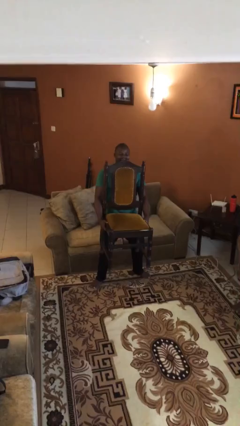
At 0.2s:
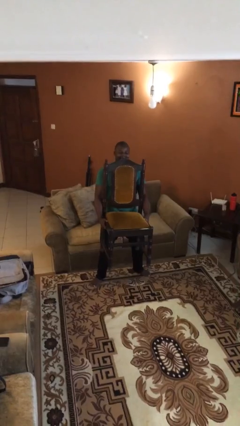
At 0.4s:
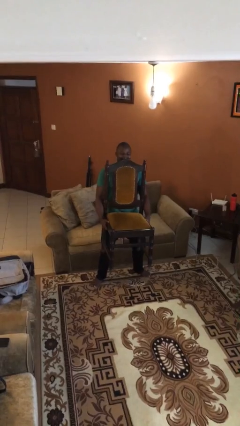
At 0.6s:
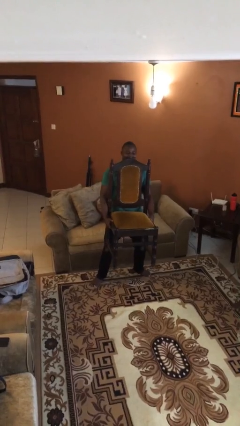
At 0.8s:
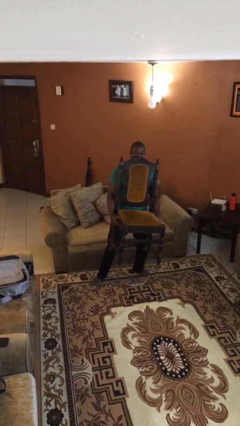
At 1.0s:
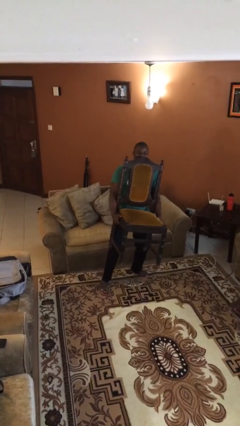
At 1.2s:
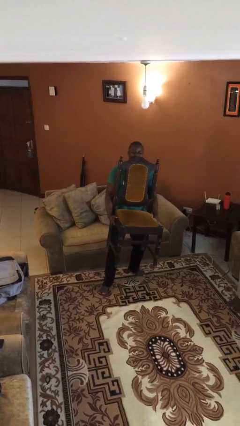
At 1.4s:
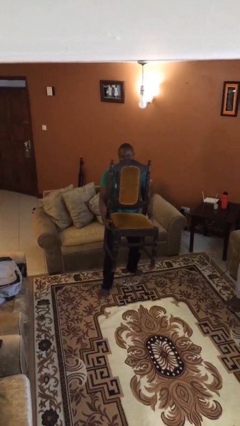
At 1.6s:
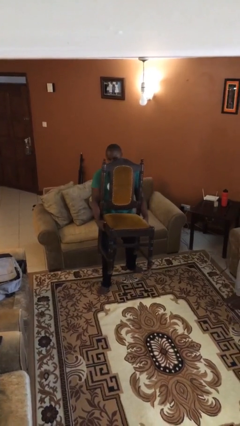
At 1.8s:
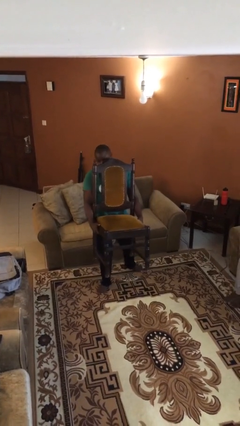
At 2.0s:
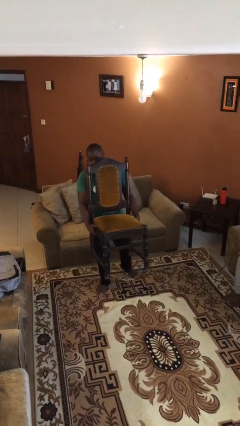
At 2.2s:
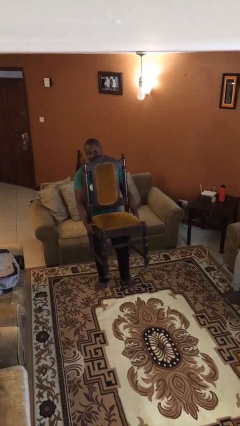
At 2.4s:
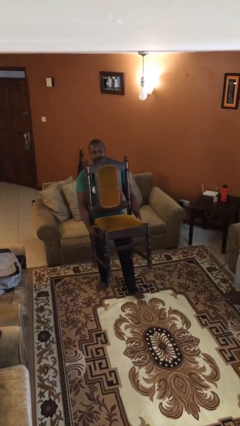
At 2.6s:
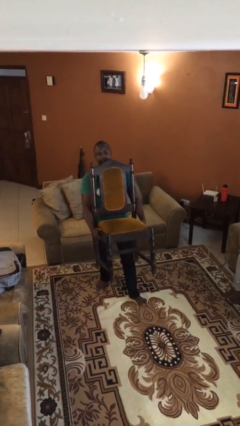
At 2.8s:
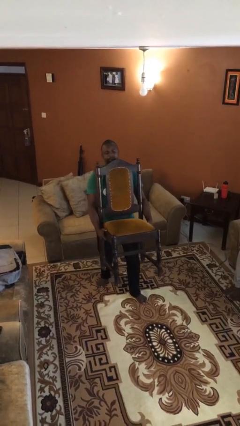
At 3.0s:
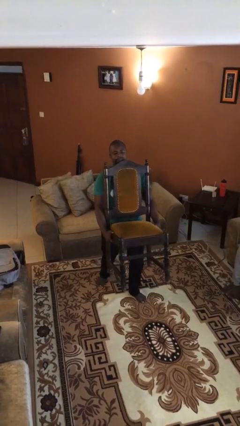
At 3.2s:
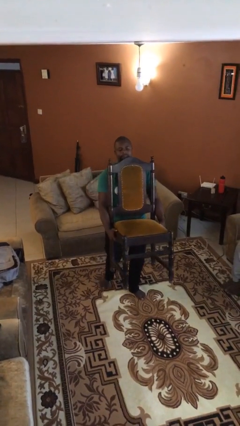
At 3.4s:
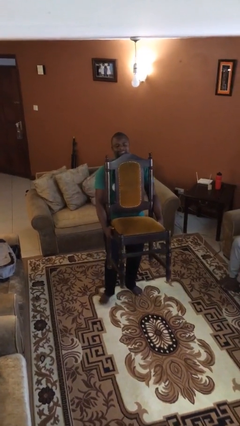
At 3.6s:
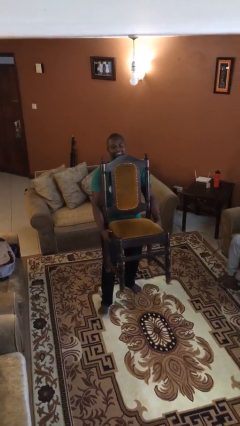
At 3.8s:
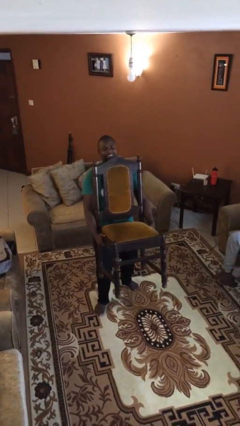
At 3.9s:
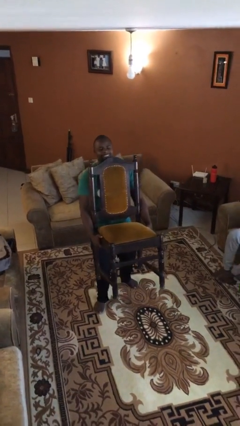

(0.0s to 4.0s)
person carries heavy object

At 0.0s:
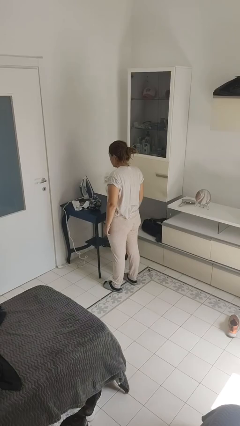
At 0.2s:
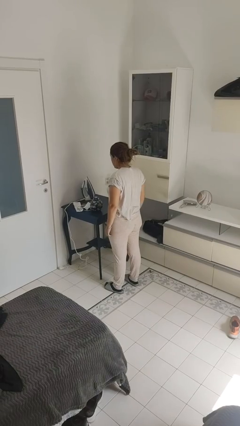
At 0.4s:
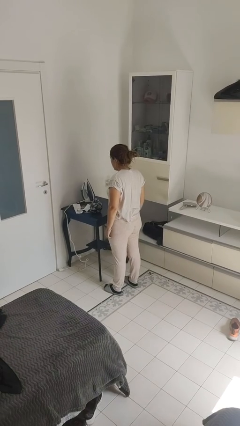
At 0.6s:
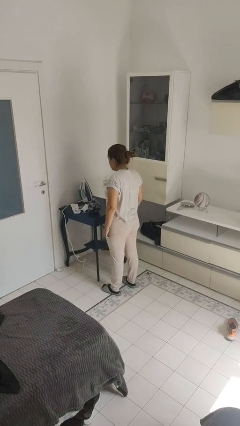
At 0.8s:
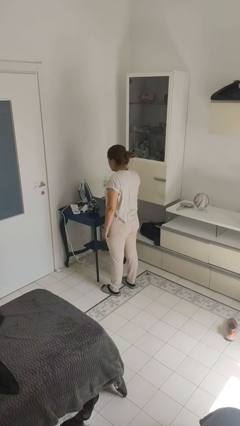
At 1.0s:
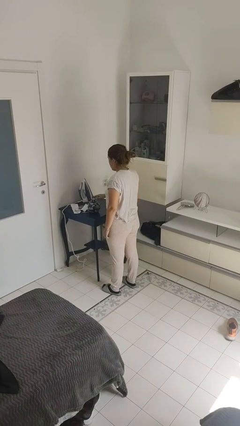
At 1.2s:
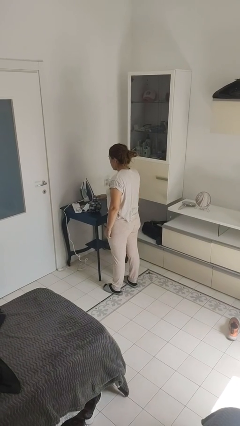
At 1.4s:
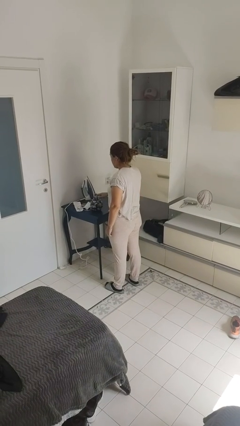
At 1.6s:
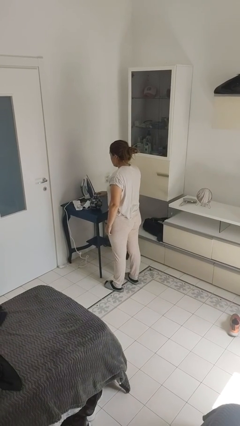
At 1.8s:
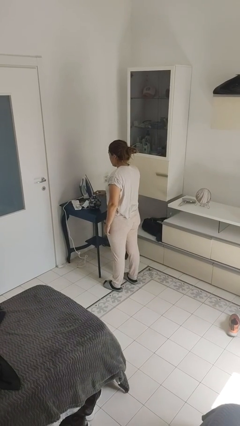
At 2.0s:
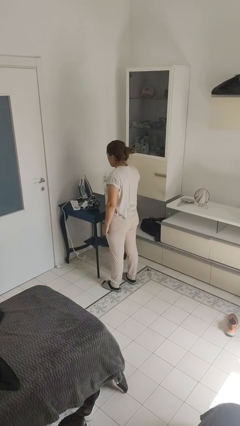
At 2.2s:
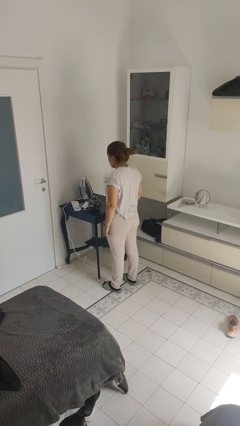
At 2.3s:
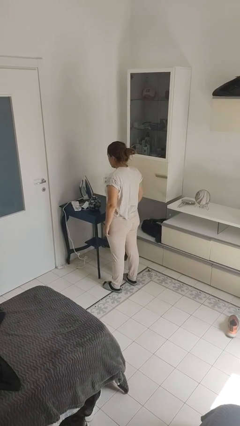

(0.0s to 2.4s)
person taps object with finger

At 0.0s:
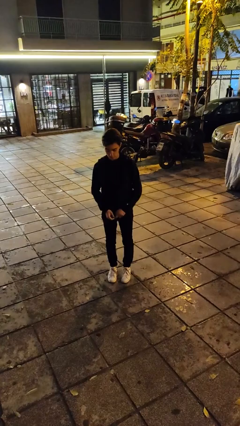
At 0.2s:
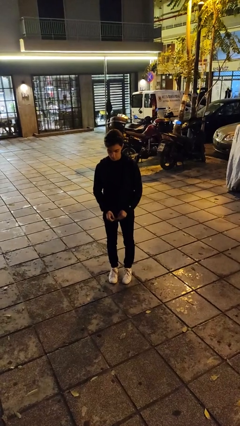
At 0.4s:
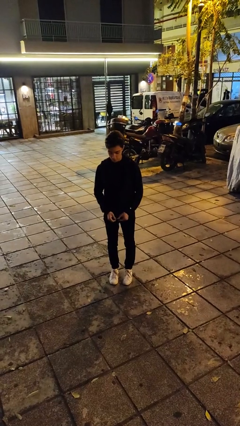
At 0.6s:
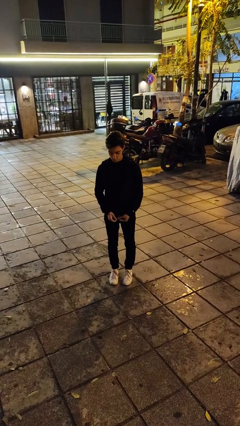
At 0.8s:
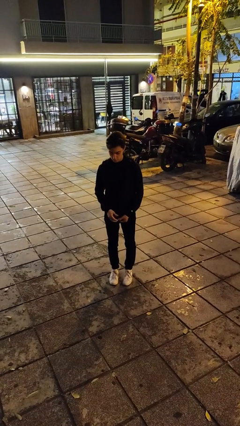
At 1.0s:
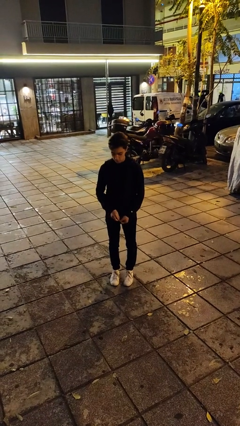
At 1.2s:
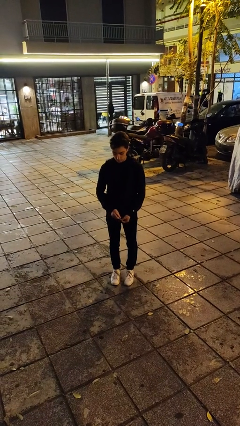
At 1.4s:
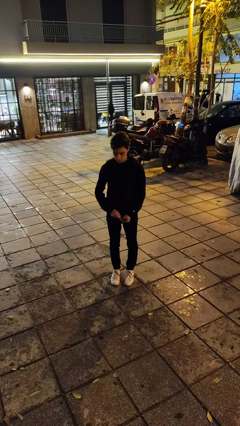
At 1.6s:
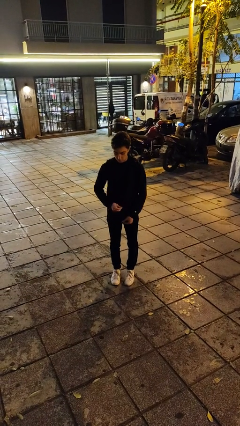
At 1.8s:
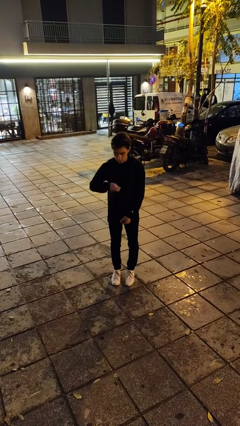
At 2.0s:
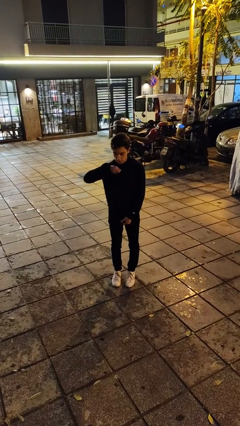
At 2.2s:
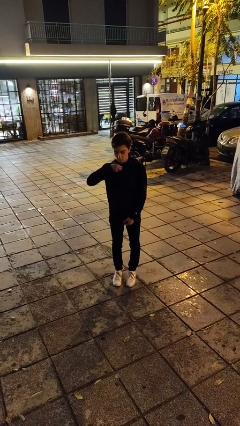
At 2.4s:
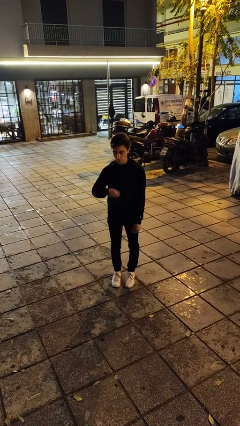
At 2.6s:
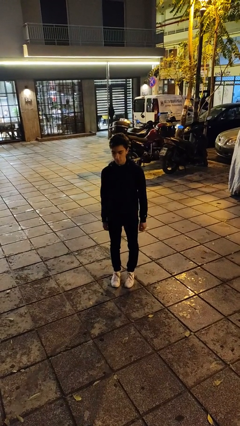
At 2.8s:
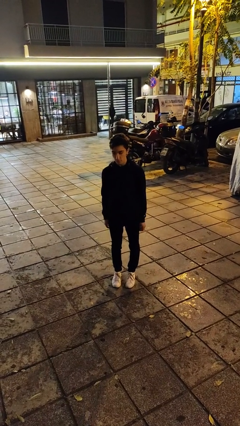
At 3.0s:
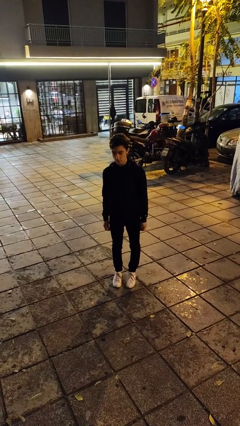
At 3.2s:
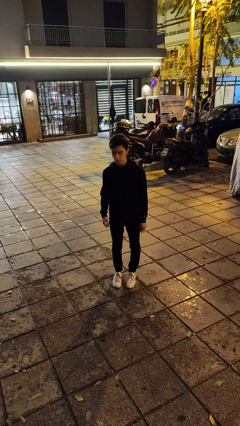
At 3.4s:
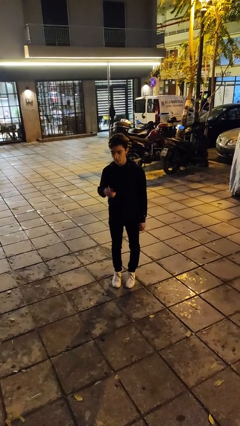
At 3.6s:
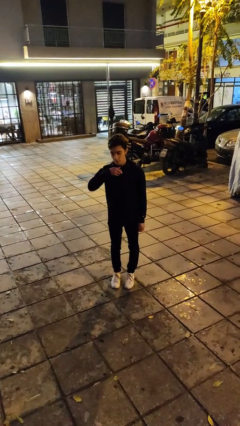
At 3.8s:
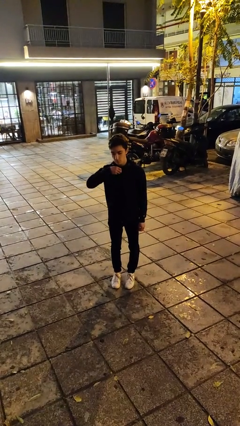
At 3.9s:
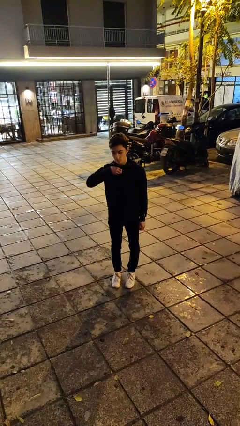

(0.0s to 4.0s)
person zips up jacket

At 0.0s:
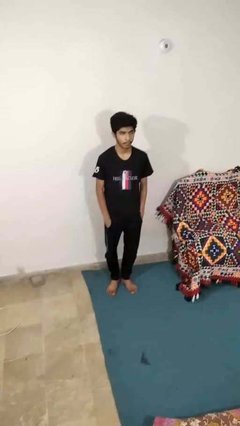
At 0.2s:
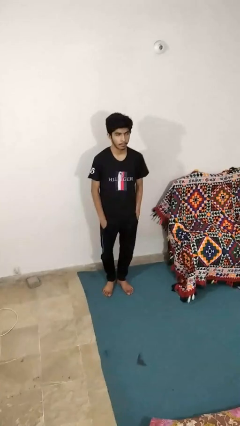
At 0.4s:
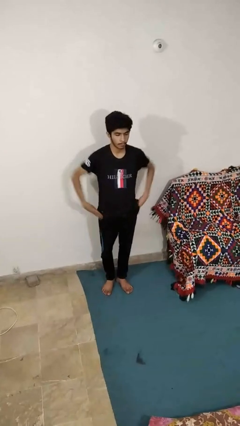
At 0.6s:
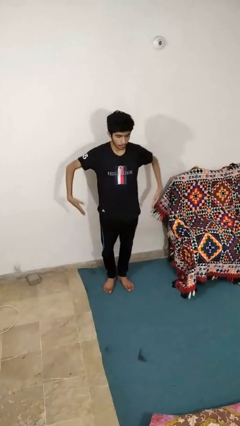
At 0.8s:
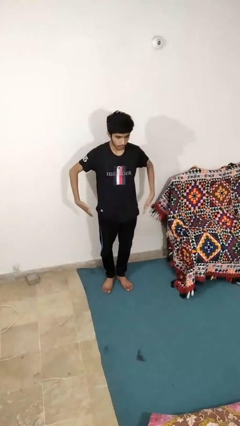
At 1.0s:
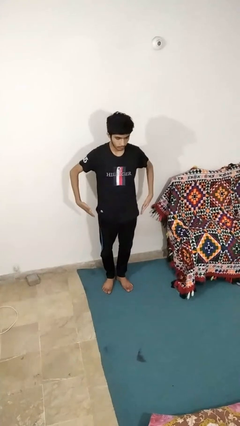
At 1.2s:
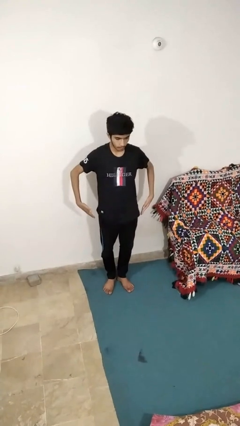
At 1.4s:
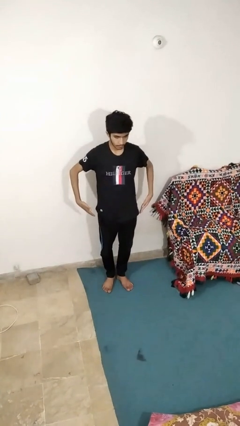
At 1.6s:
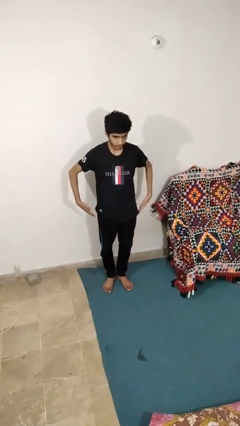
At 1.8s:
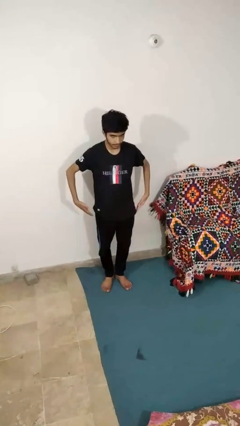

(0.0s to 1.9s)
person puts hands in back pockets

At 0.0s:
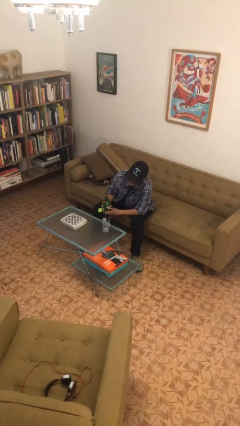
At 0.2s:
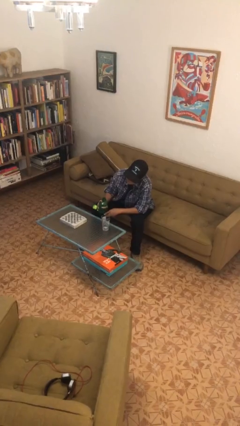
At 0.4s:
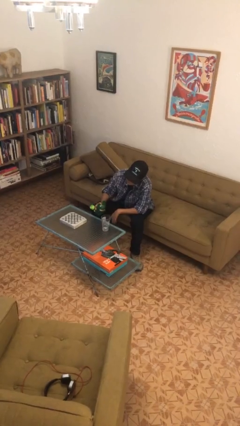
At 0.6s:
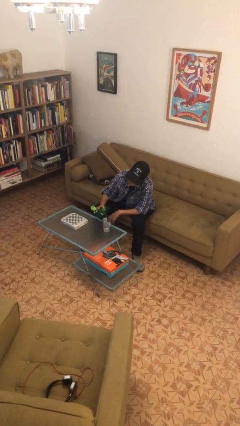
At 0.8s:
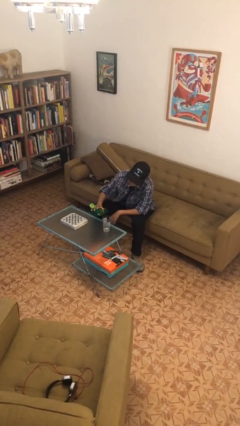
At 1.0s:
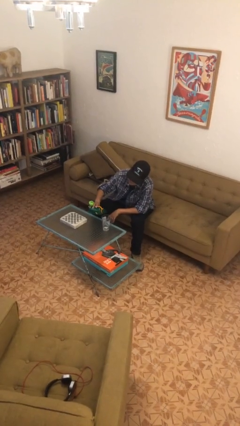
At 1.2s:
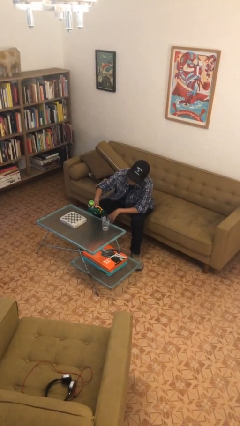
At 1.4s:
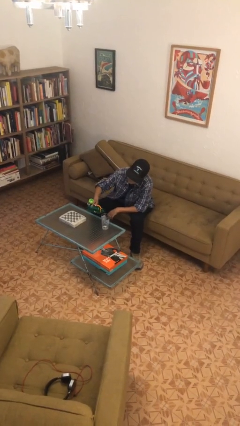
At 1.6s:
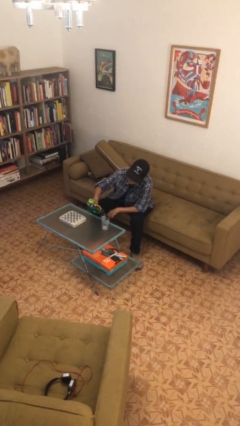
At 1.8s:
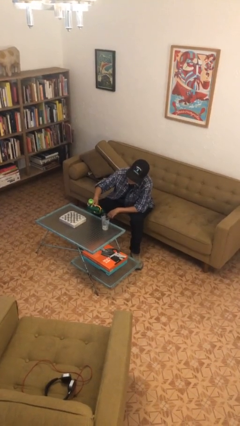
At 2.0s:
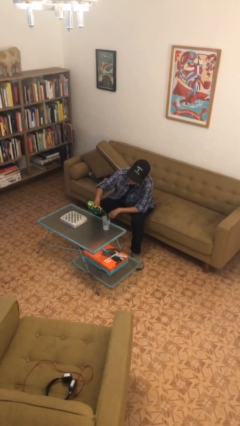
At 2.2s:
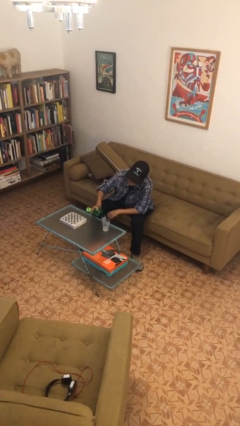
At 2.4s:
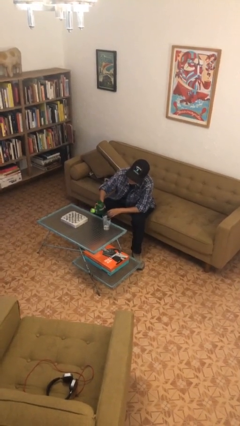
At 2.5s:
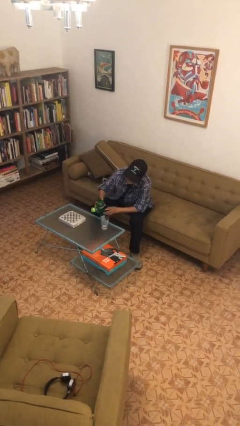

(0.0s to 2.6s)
person pours liquid into cup

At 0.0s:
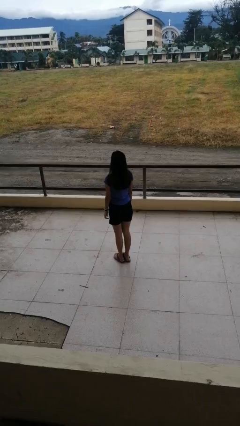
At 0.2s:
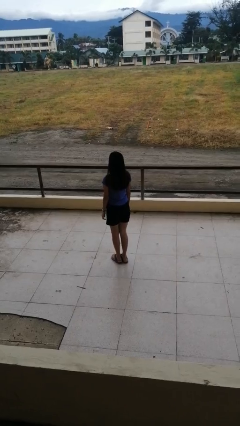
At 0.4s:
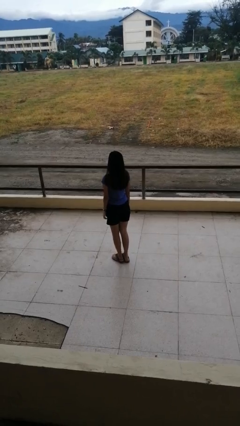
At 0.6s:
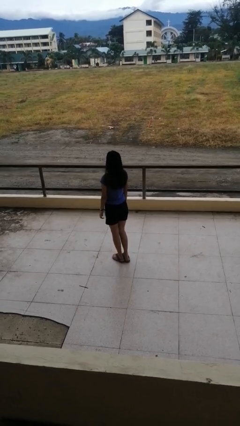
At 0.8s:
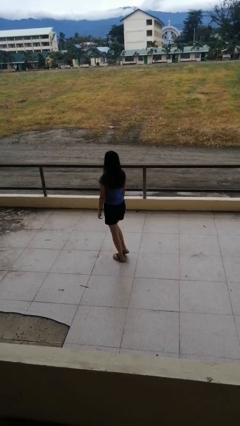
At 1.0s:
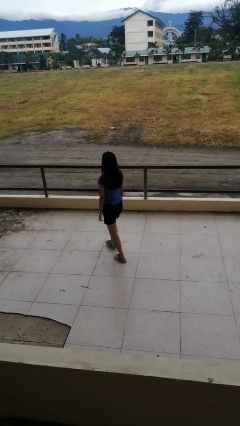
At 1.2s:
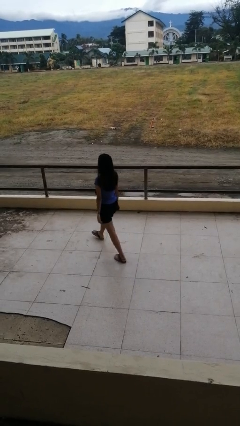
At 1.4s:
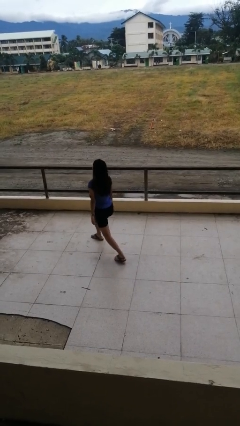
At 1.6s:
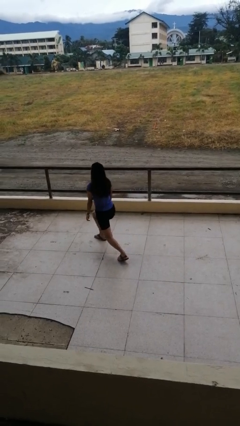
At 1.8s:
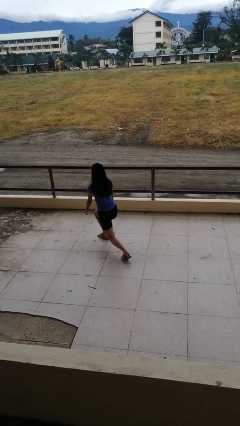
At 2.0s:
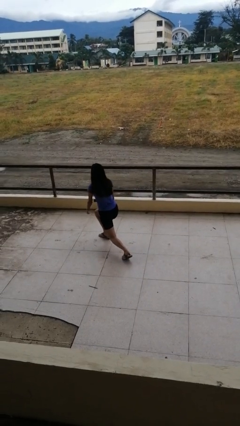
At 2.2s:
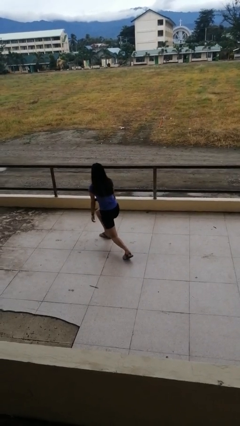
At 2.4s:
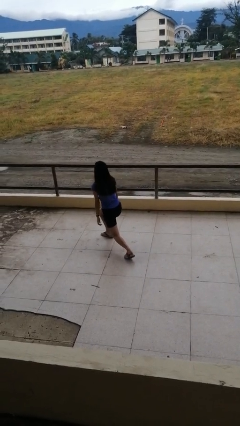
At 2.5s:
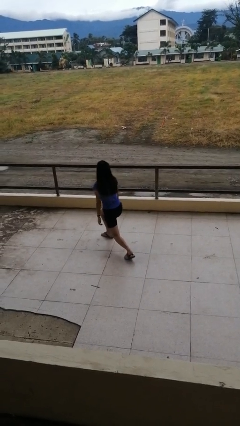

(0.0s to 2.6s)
person exercises with lunges

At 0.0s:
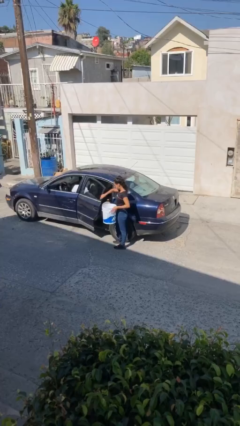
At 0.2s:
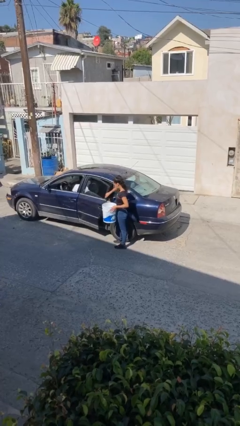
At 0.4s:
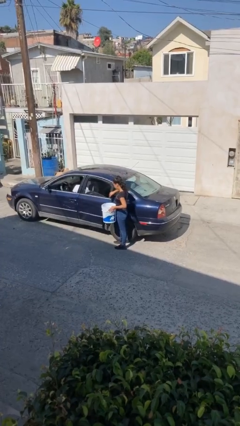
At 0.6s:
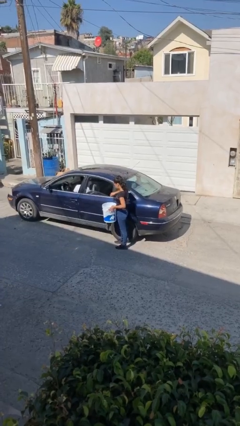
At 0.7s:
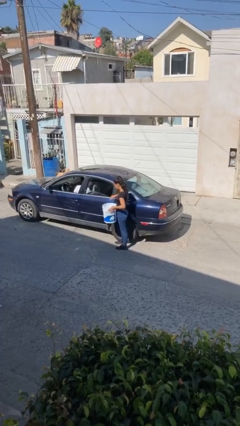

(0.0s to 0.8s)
person closes car door
